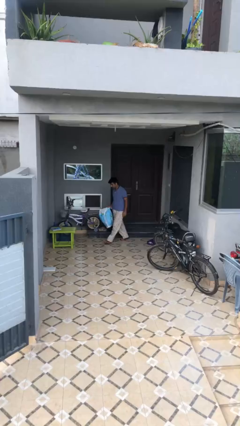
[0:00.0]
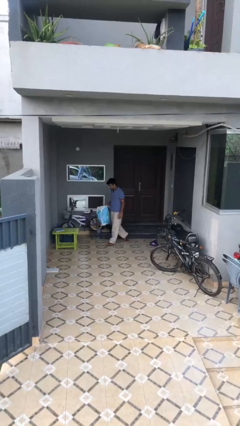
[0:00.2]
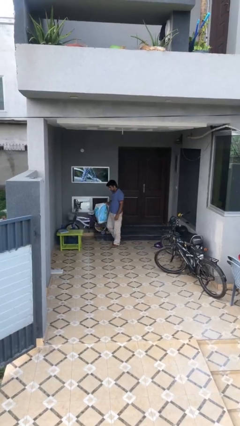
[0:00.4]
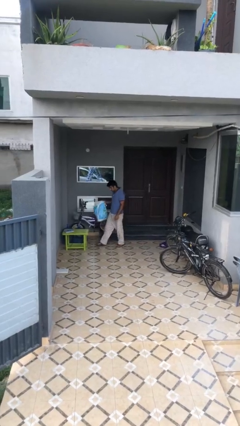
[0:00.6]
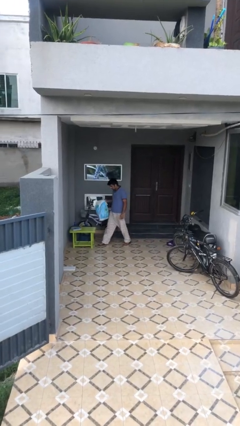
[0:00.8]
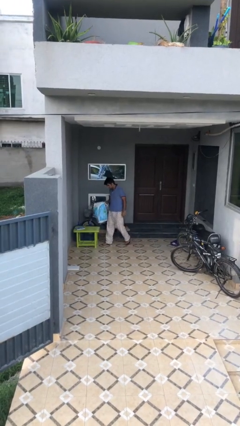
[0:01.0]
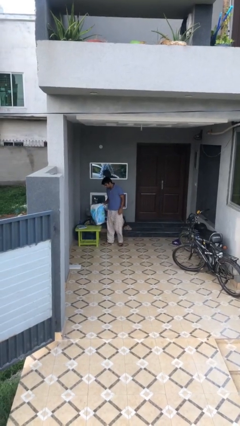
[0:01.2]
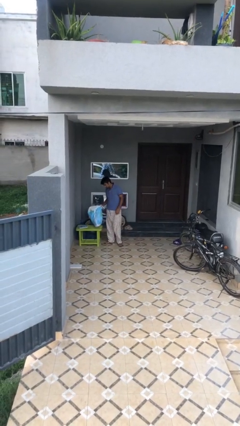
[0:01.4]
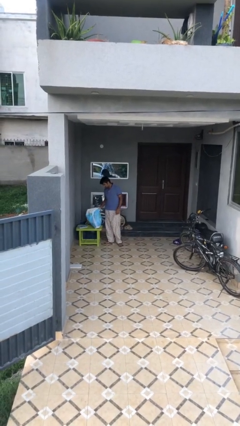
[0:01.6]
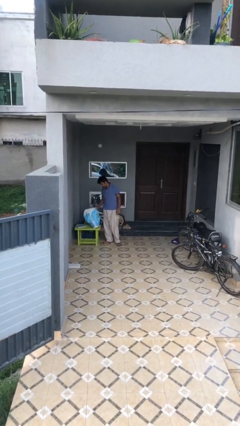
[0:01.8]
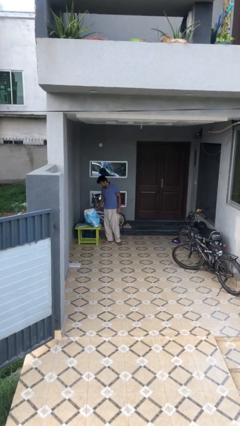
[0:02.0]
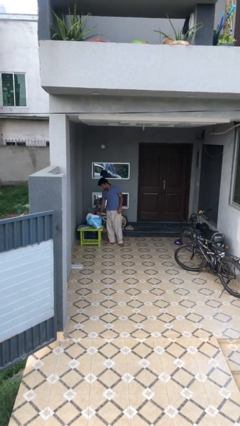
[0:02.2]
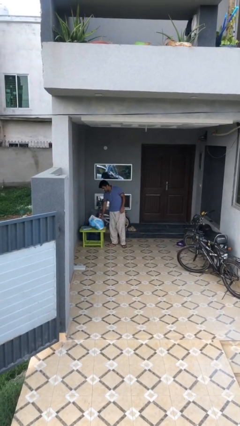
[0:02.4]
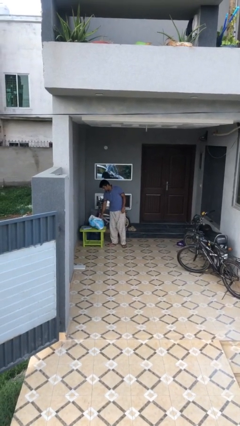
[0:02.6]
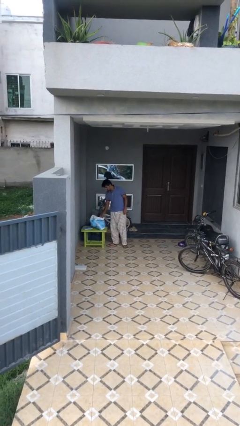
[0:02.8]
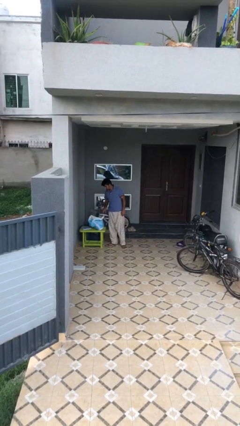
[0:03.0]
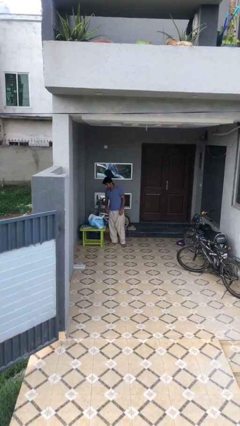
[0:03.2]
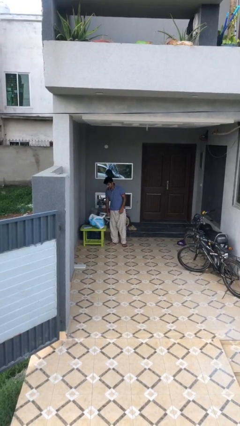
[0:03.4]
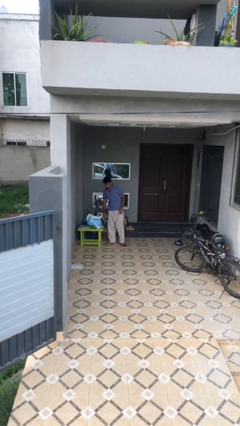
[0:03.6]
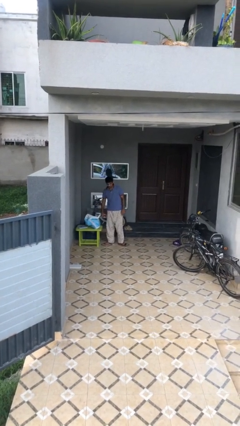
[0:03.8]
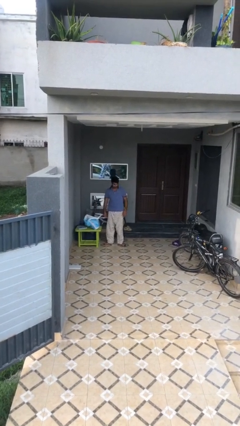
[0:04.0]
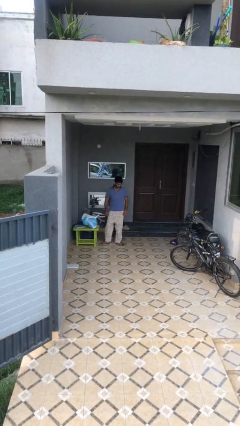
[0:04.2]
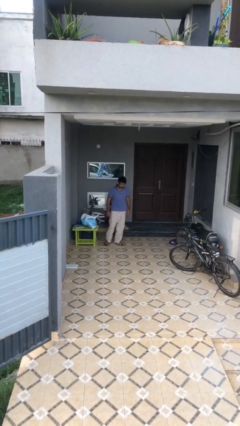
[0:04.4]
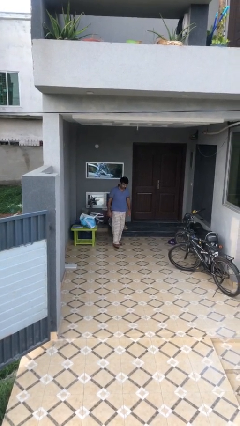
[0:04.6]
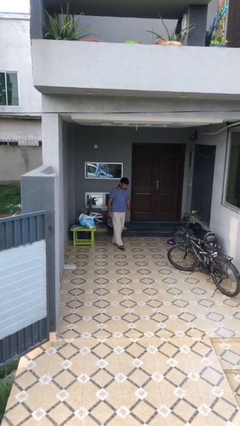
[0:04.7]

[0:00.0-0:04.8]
person puts down object on table

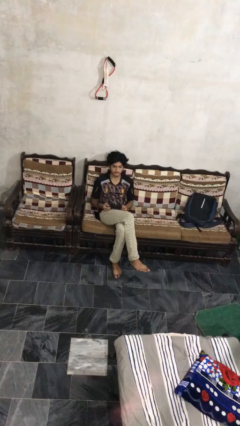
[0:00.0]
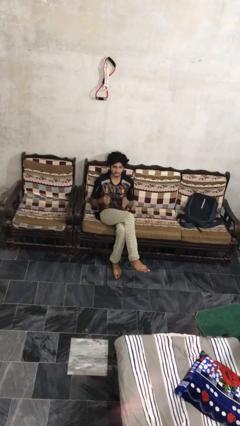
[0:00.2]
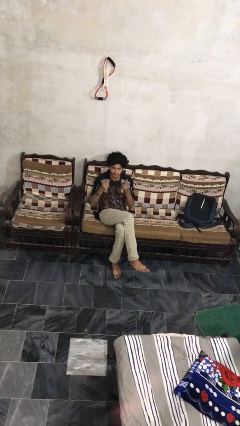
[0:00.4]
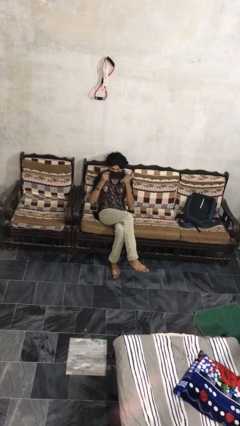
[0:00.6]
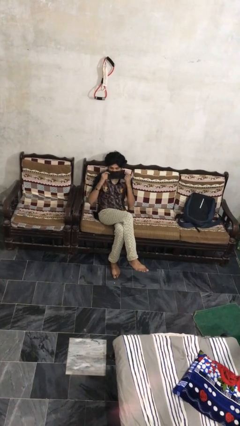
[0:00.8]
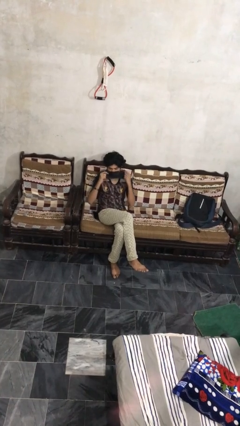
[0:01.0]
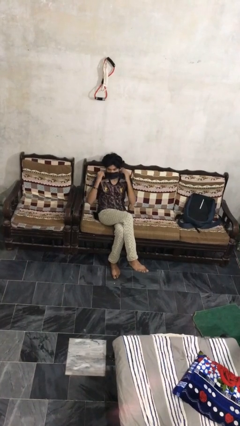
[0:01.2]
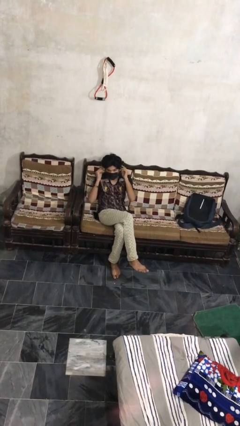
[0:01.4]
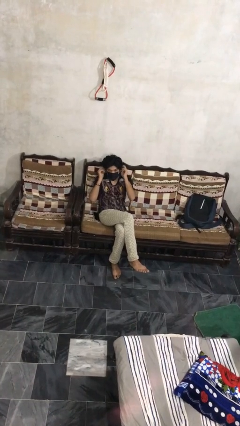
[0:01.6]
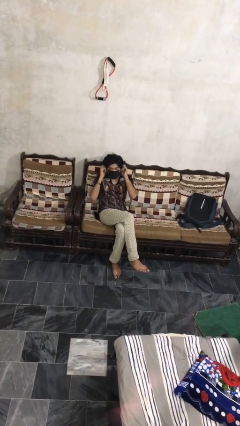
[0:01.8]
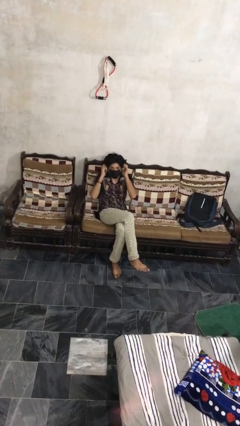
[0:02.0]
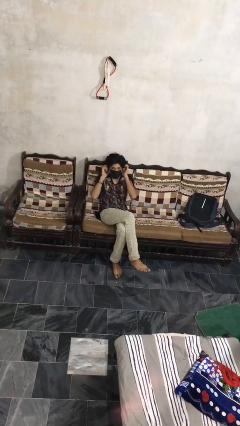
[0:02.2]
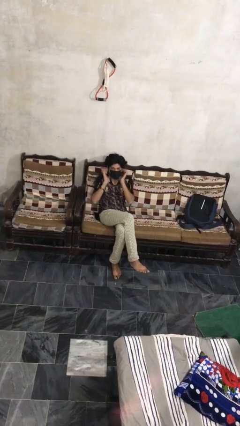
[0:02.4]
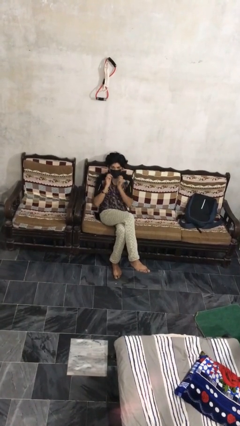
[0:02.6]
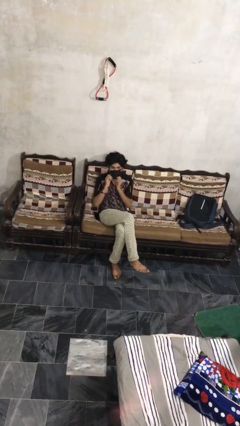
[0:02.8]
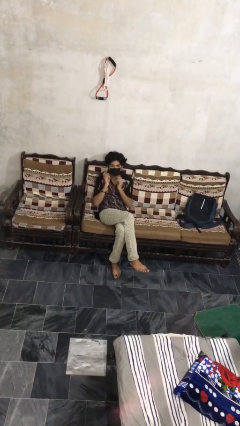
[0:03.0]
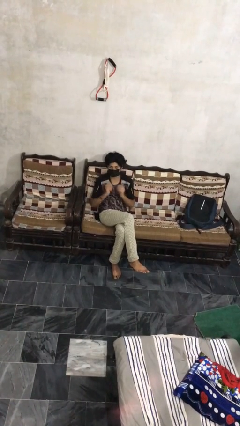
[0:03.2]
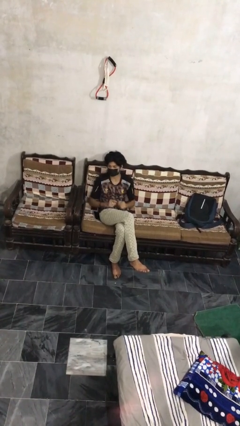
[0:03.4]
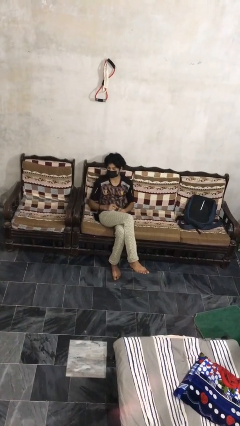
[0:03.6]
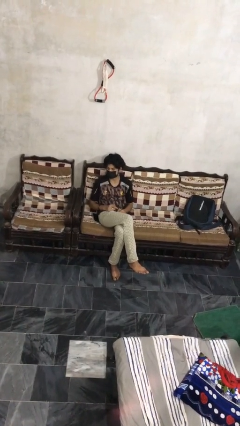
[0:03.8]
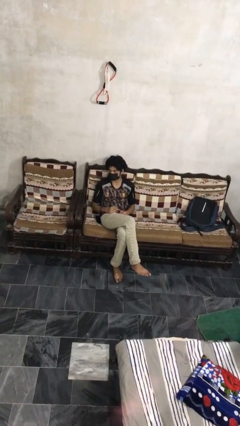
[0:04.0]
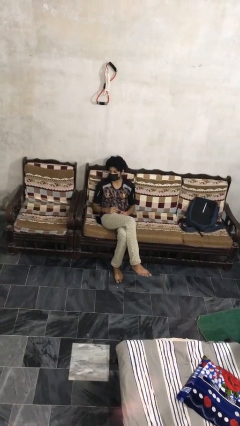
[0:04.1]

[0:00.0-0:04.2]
person puts on facemask

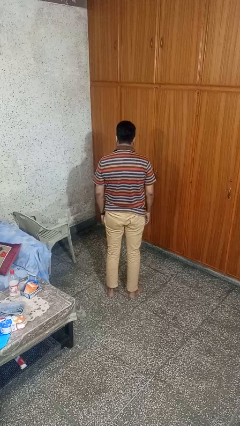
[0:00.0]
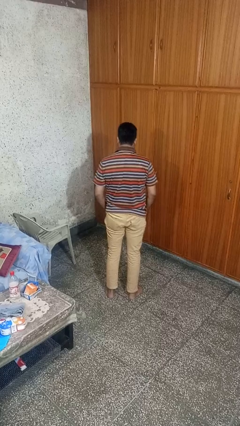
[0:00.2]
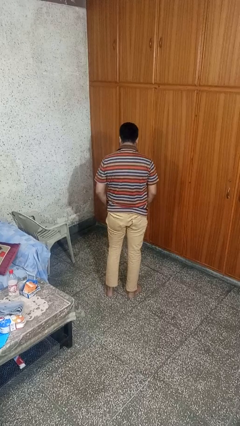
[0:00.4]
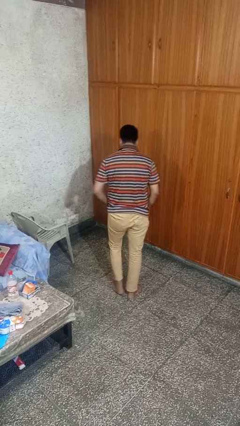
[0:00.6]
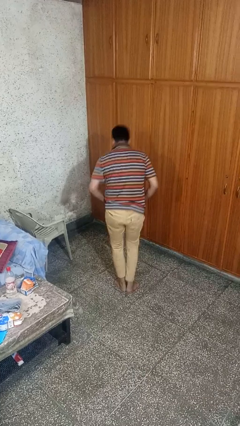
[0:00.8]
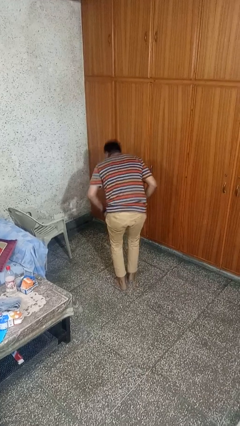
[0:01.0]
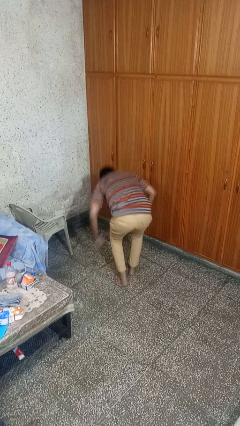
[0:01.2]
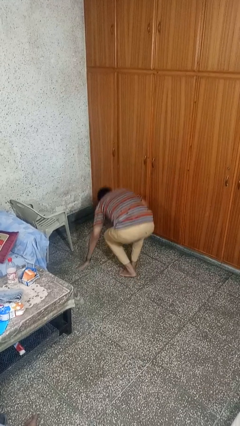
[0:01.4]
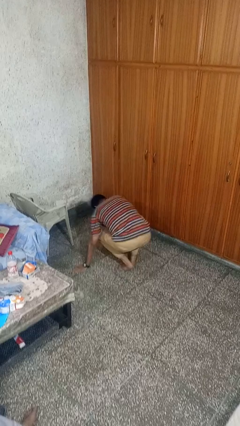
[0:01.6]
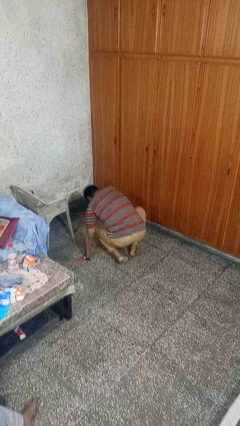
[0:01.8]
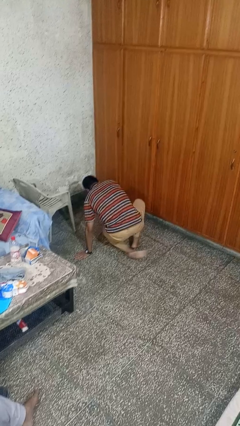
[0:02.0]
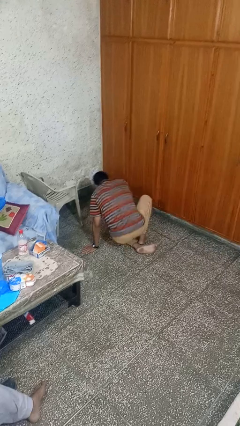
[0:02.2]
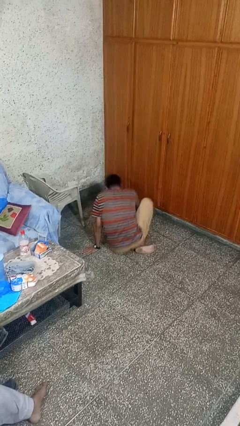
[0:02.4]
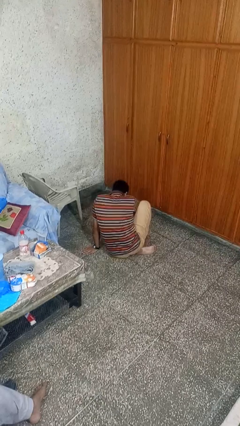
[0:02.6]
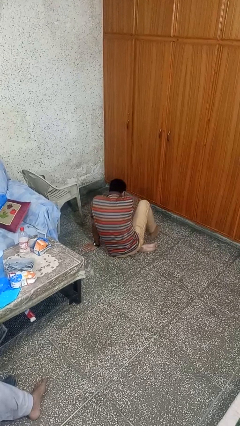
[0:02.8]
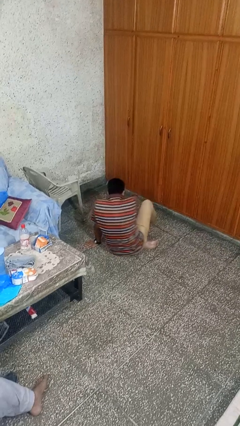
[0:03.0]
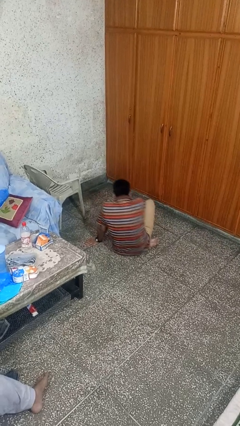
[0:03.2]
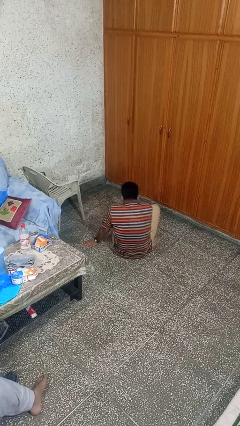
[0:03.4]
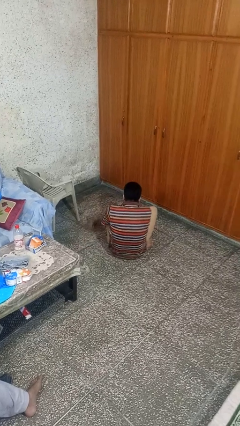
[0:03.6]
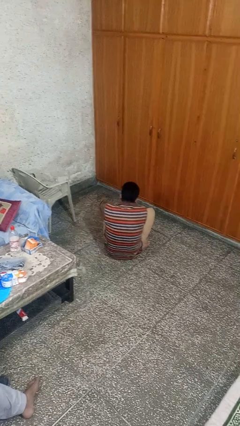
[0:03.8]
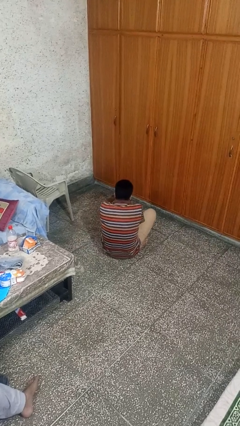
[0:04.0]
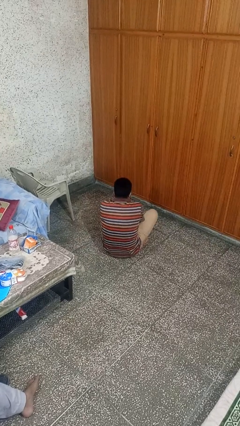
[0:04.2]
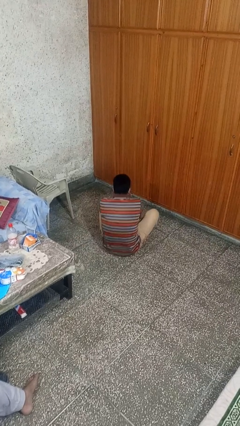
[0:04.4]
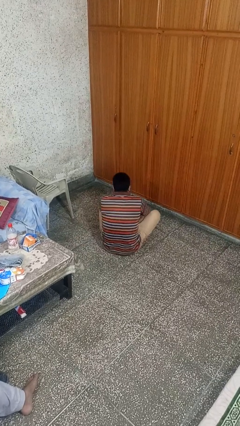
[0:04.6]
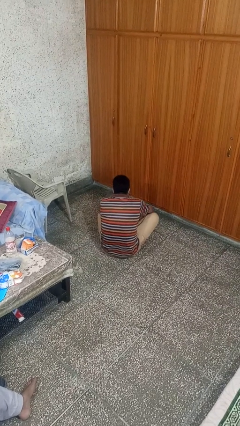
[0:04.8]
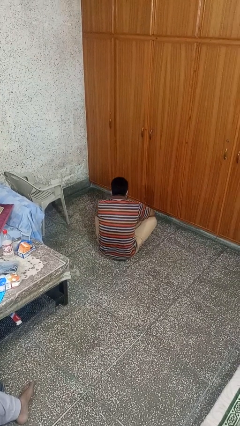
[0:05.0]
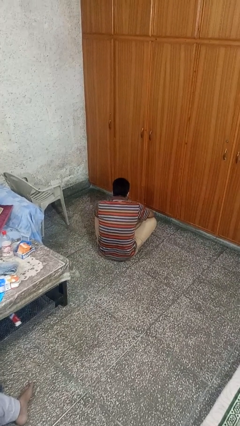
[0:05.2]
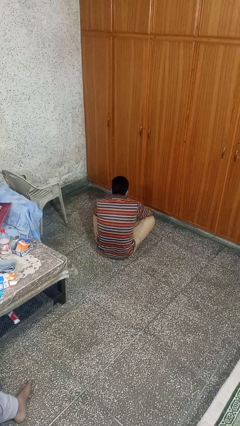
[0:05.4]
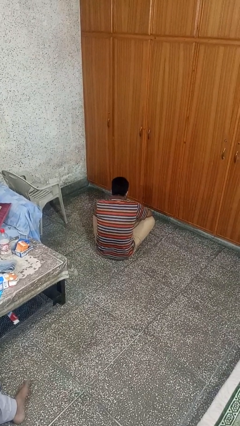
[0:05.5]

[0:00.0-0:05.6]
person sits crisscross

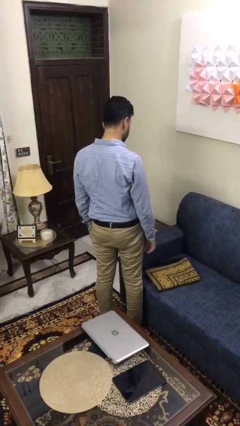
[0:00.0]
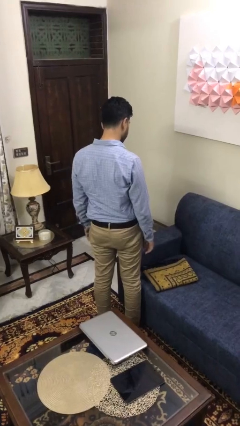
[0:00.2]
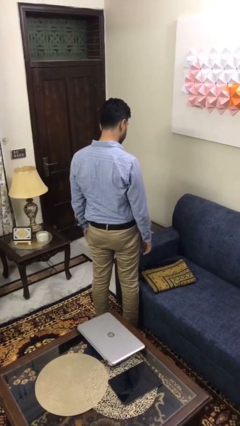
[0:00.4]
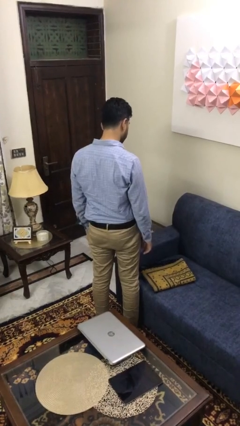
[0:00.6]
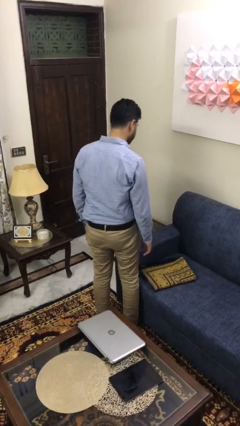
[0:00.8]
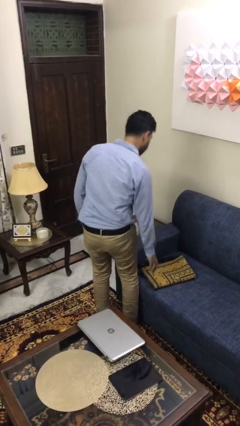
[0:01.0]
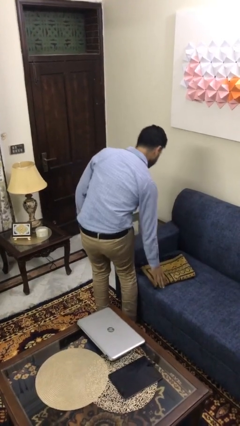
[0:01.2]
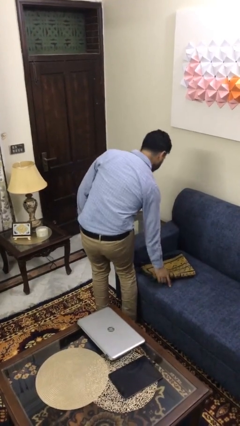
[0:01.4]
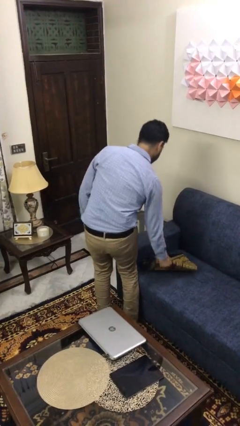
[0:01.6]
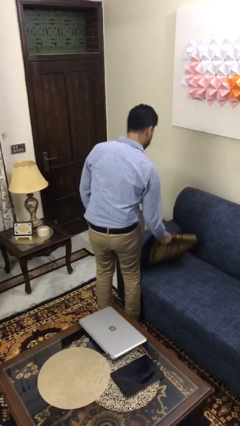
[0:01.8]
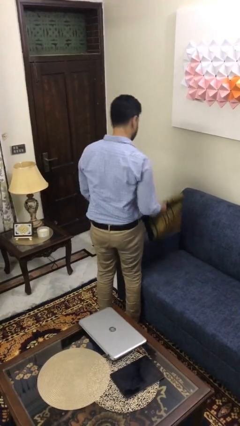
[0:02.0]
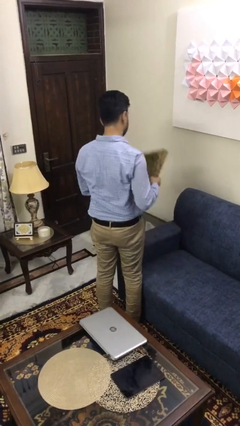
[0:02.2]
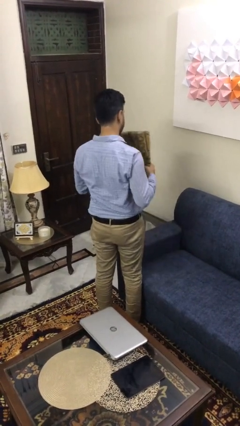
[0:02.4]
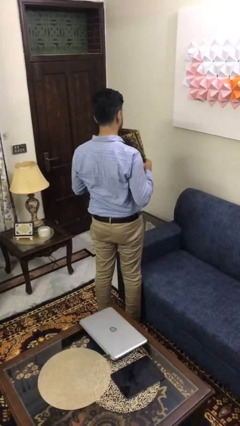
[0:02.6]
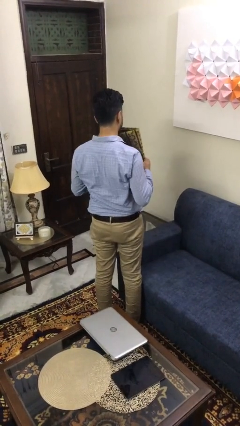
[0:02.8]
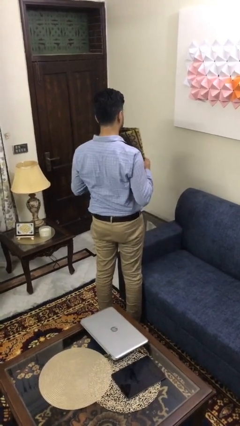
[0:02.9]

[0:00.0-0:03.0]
person picks up object from couch

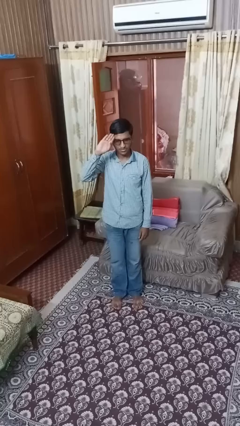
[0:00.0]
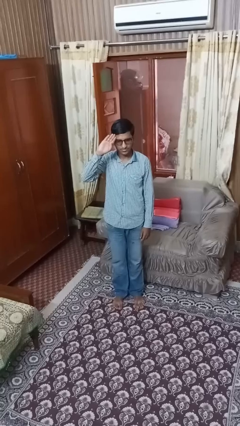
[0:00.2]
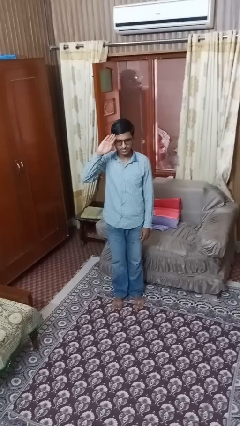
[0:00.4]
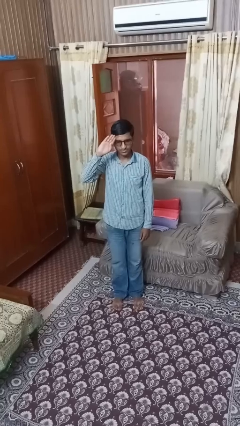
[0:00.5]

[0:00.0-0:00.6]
person salutes
